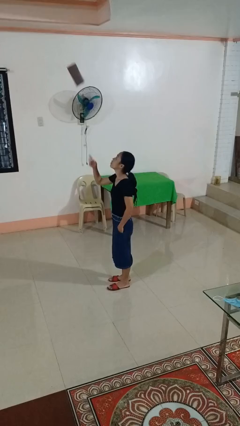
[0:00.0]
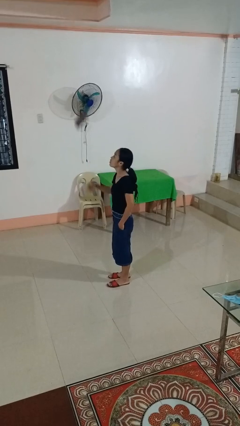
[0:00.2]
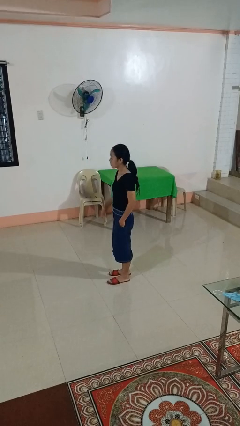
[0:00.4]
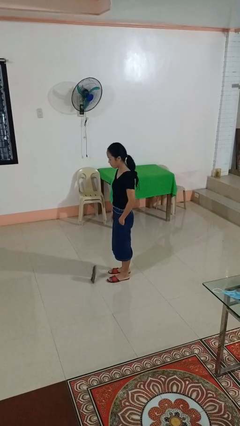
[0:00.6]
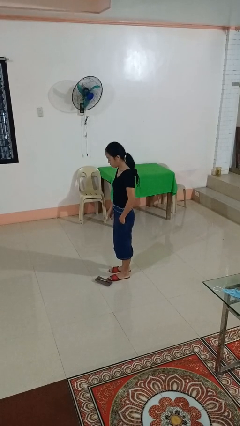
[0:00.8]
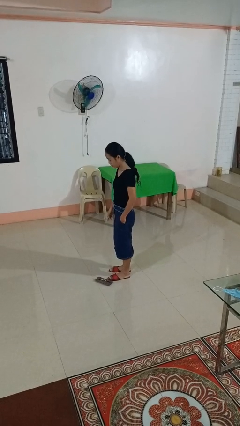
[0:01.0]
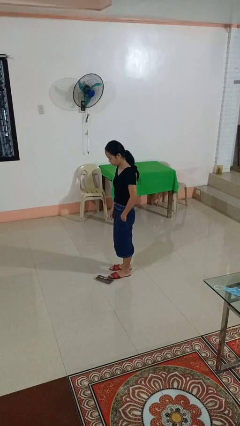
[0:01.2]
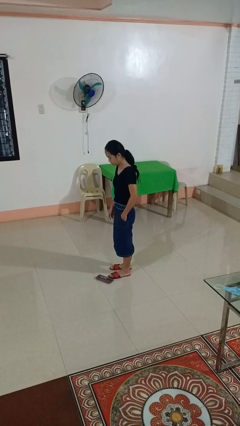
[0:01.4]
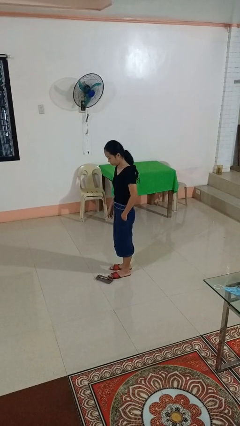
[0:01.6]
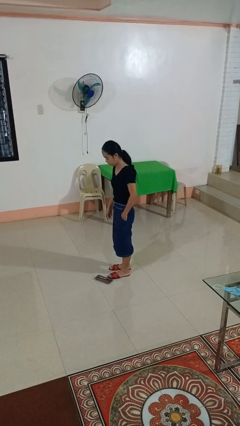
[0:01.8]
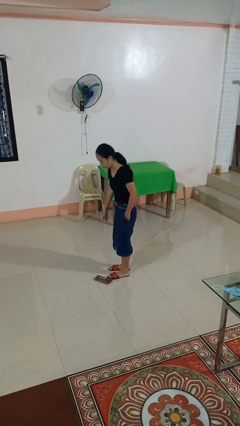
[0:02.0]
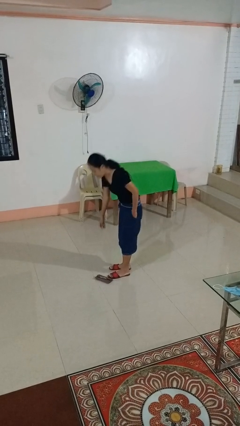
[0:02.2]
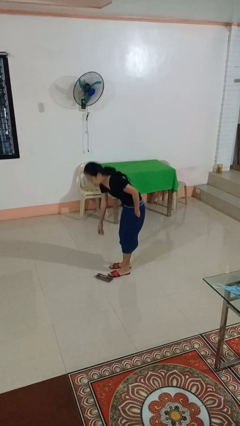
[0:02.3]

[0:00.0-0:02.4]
person throws object into air

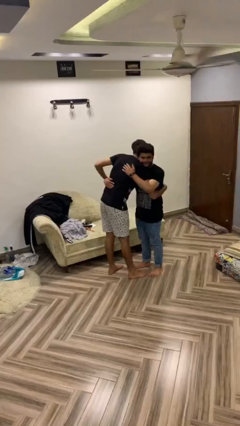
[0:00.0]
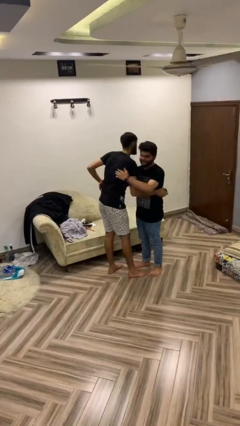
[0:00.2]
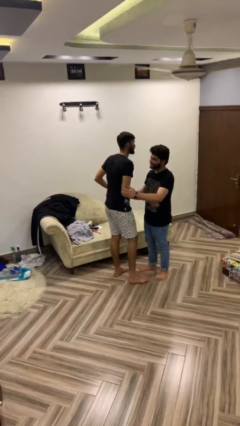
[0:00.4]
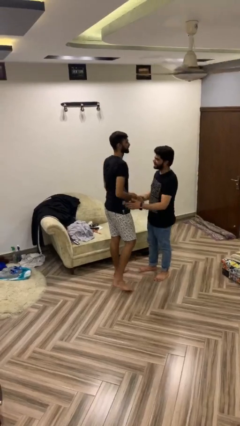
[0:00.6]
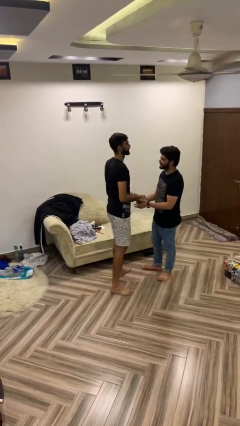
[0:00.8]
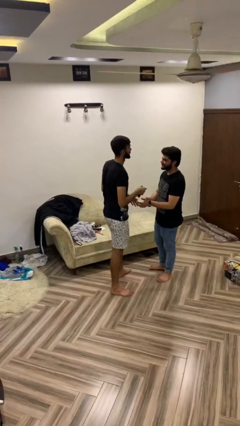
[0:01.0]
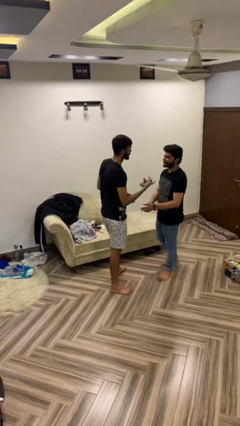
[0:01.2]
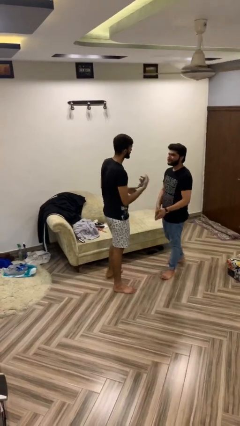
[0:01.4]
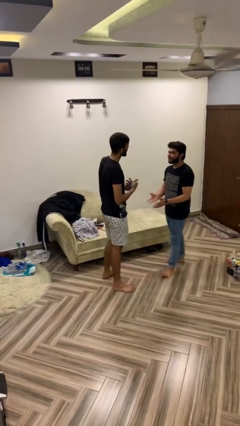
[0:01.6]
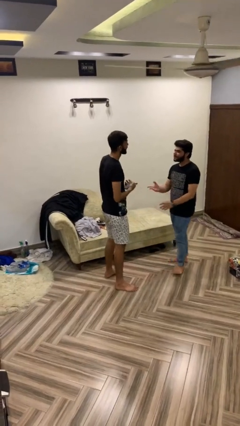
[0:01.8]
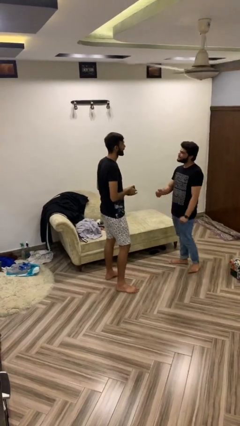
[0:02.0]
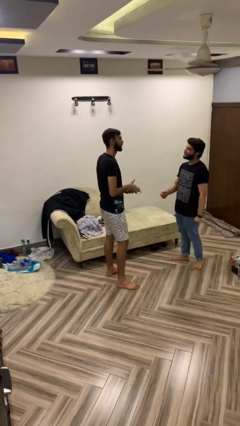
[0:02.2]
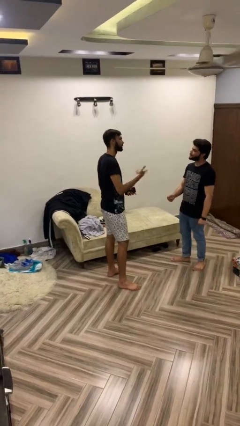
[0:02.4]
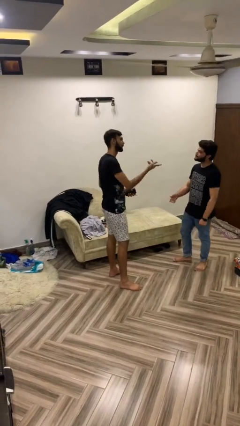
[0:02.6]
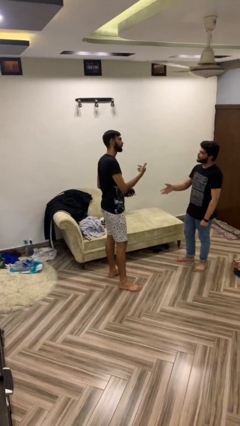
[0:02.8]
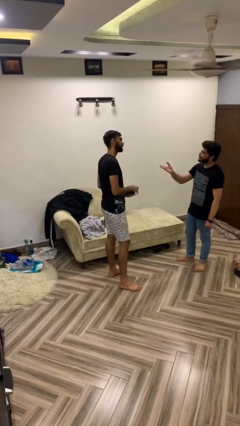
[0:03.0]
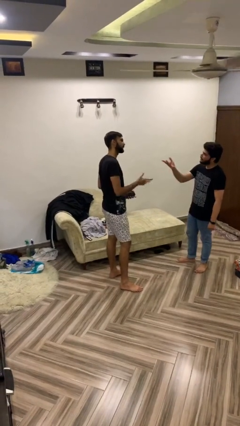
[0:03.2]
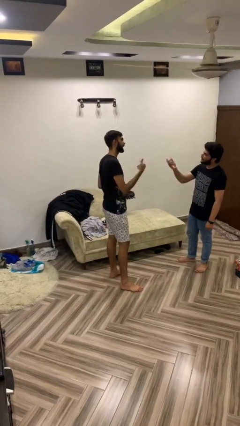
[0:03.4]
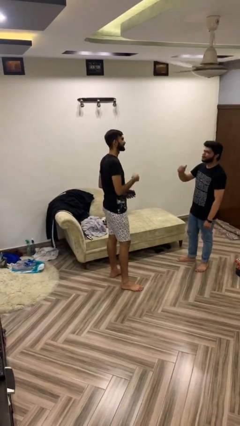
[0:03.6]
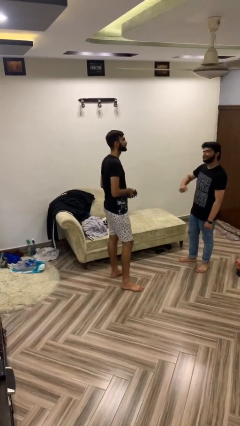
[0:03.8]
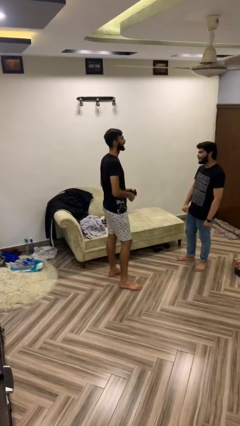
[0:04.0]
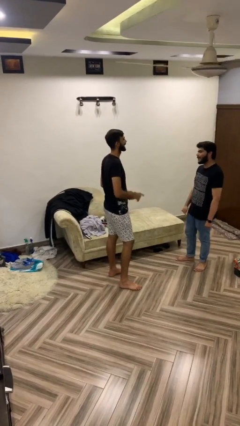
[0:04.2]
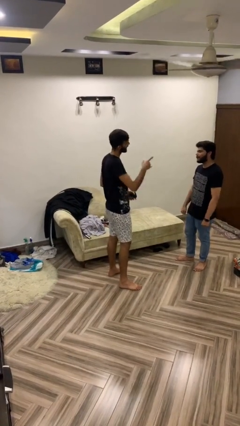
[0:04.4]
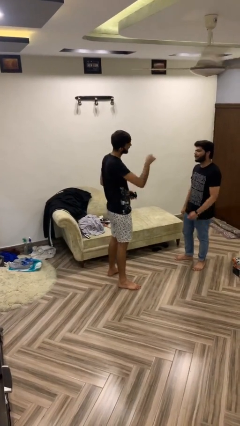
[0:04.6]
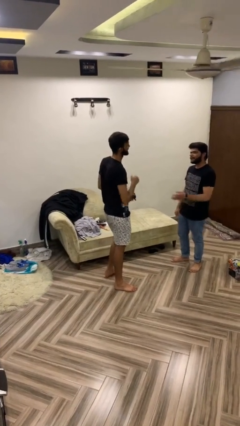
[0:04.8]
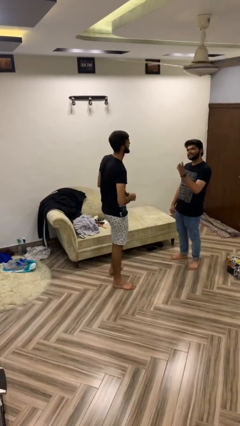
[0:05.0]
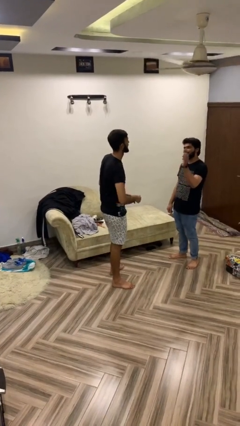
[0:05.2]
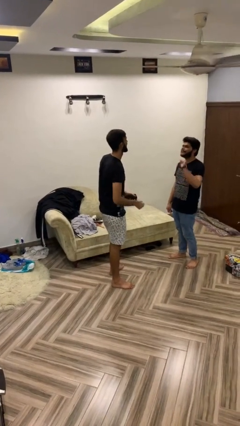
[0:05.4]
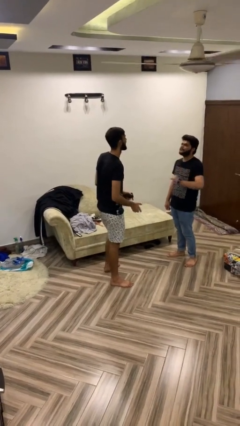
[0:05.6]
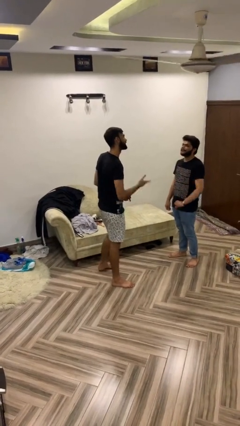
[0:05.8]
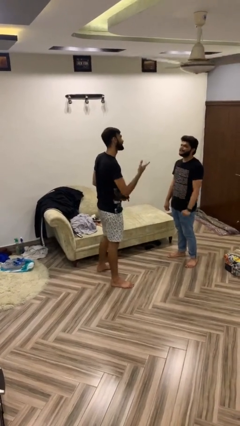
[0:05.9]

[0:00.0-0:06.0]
person talks to person

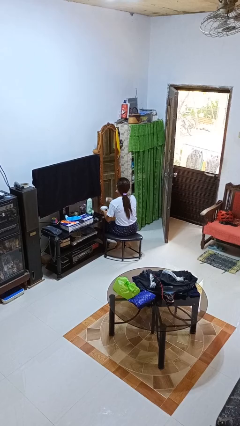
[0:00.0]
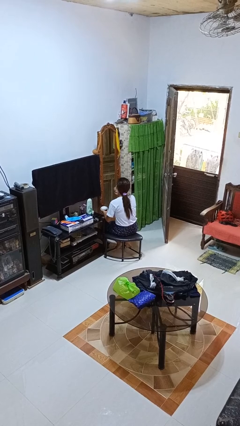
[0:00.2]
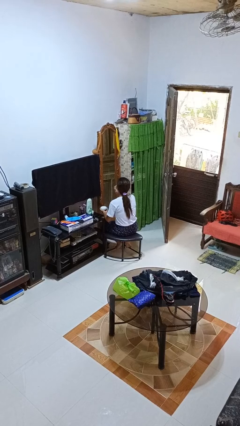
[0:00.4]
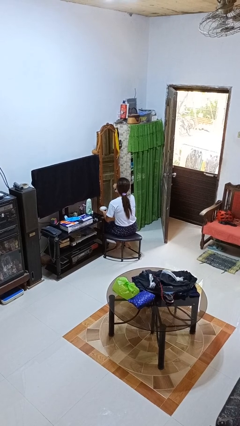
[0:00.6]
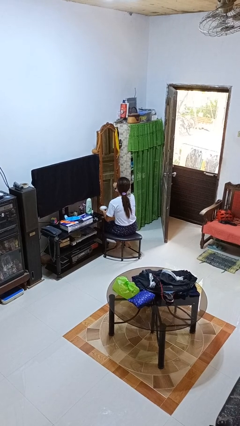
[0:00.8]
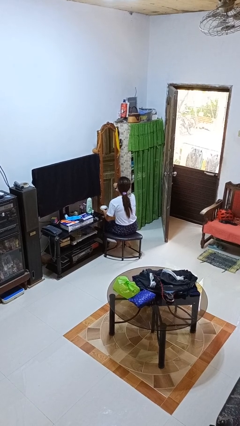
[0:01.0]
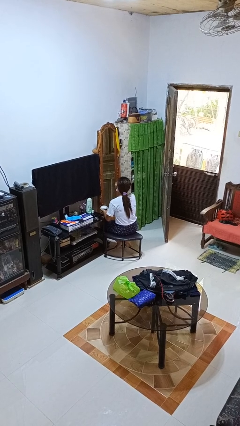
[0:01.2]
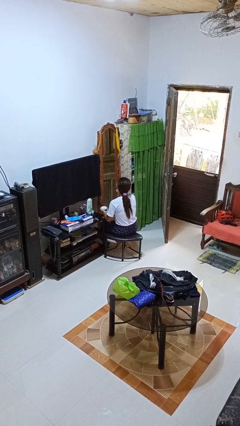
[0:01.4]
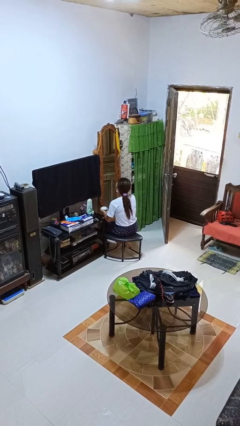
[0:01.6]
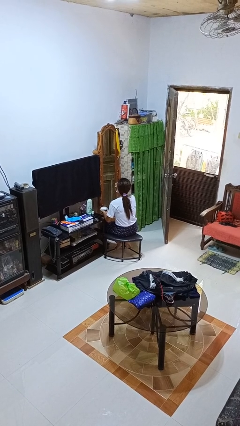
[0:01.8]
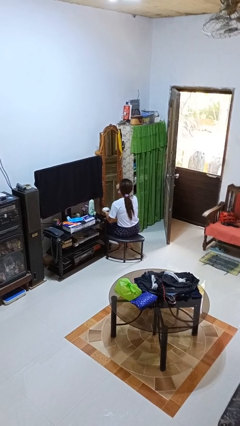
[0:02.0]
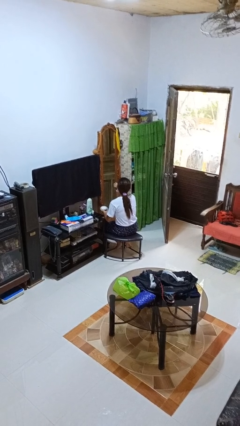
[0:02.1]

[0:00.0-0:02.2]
person applies foundation makeup

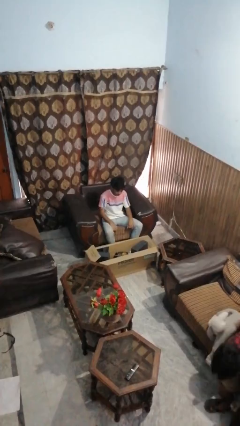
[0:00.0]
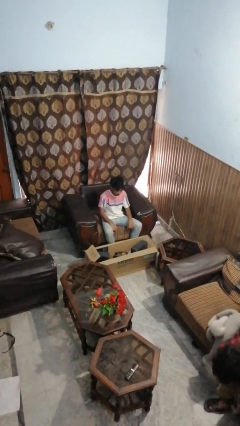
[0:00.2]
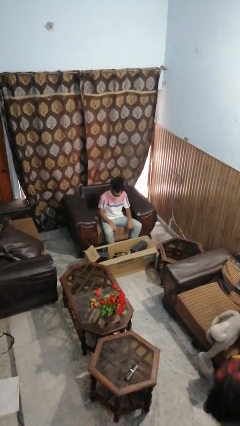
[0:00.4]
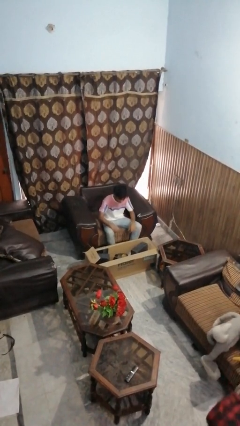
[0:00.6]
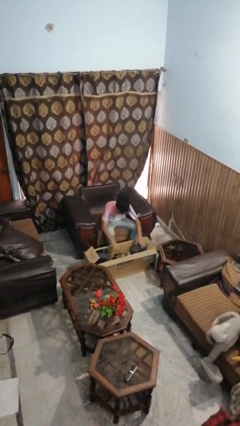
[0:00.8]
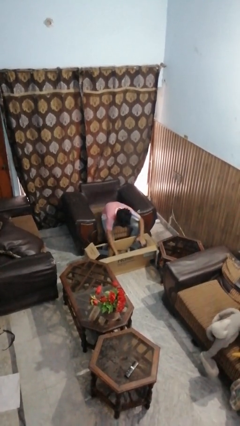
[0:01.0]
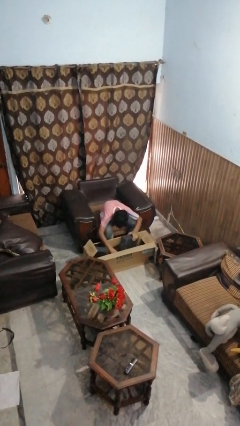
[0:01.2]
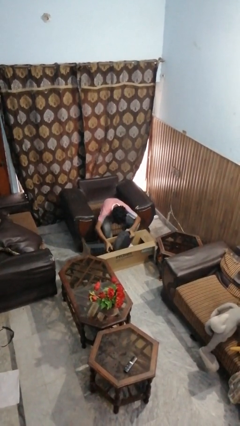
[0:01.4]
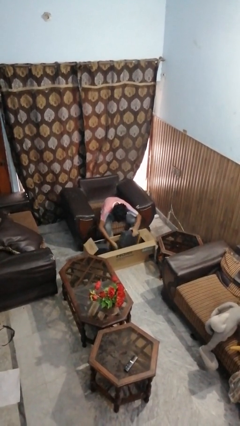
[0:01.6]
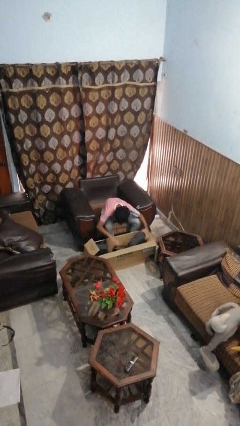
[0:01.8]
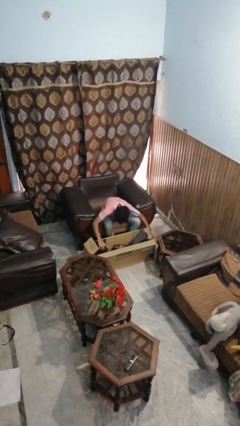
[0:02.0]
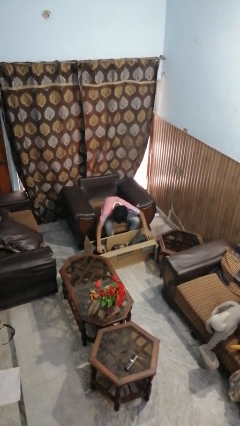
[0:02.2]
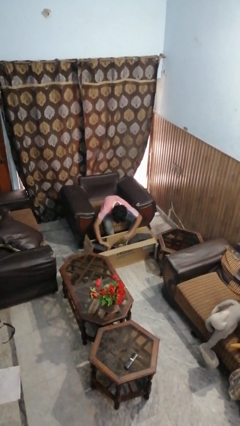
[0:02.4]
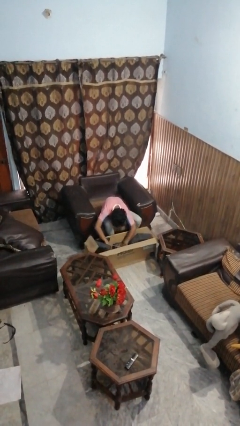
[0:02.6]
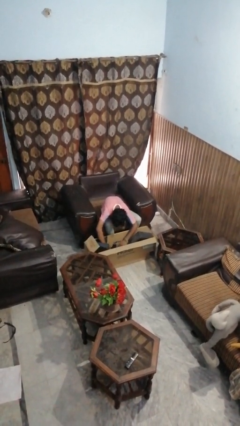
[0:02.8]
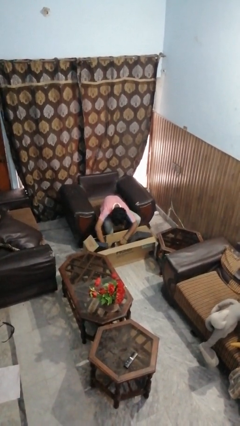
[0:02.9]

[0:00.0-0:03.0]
person searches in box

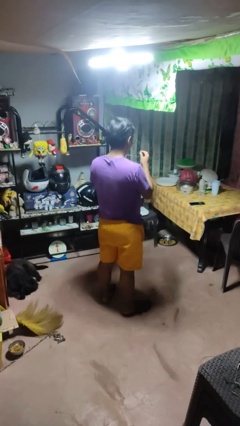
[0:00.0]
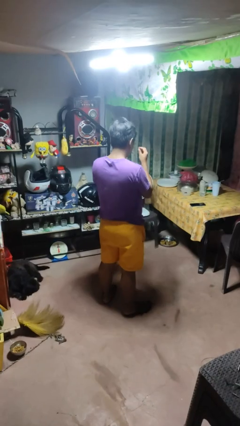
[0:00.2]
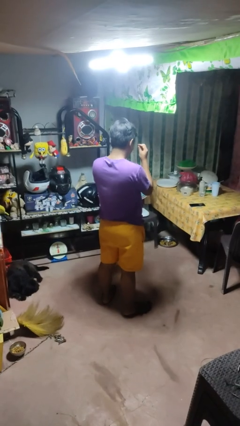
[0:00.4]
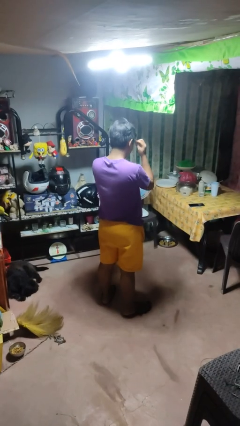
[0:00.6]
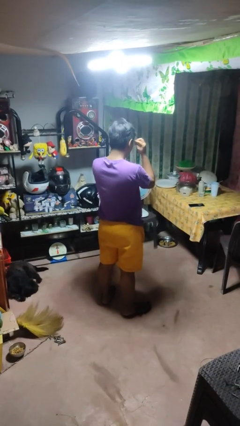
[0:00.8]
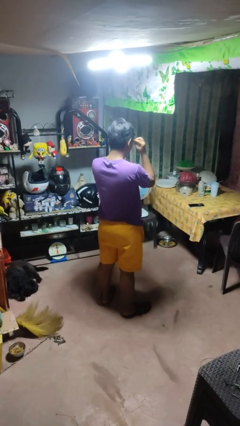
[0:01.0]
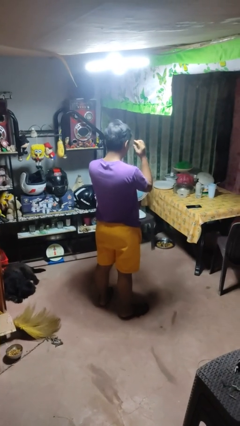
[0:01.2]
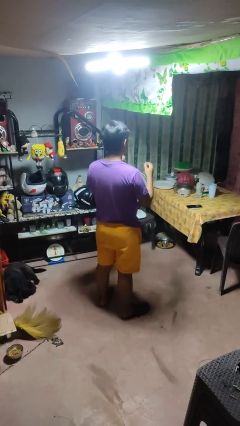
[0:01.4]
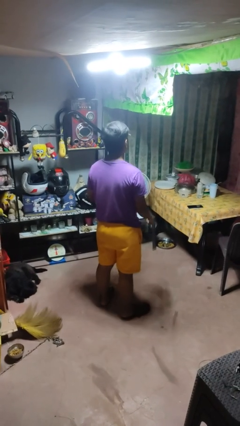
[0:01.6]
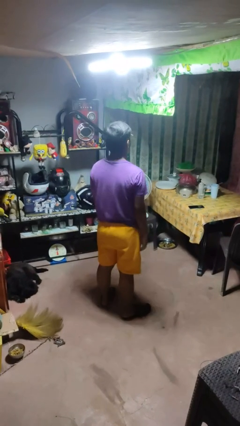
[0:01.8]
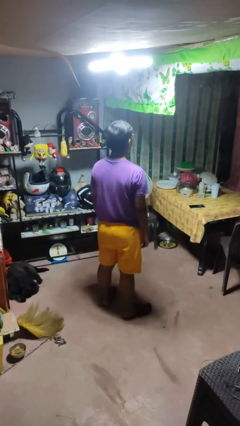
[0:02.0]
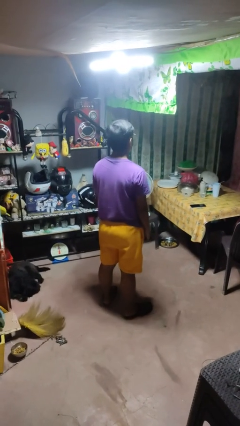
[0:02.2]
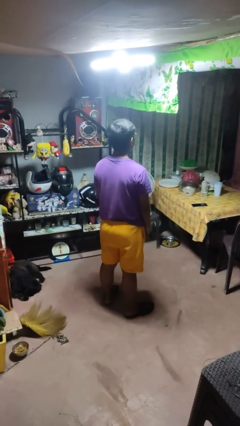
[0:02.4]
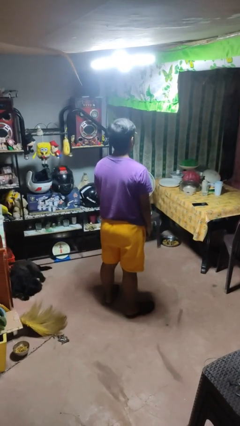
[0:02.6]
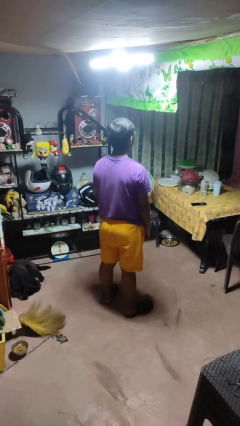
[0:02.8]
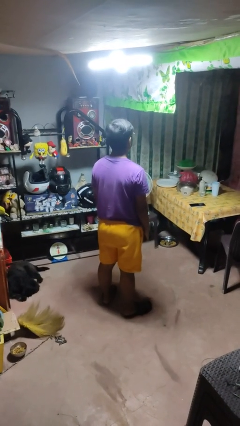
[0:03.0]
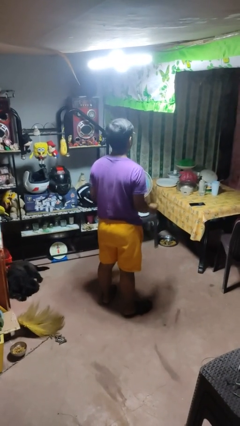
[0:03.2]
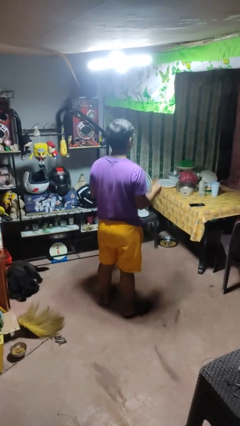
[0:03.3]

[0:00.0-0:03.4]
person puts on glasses

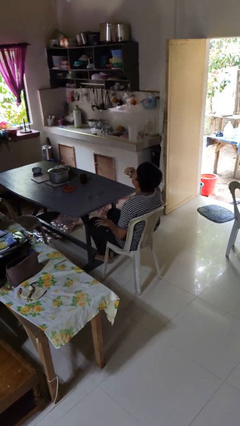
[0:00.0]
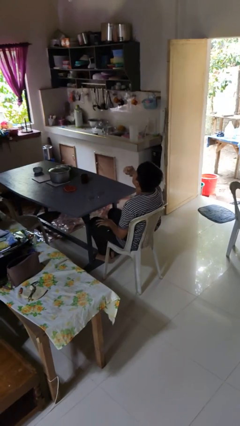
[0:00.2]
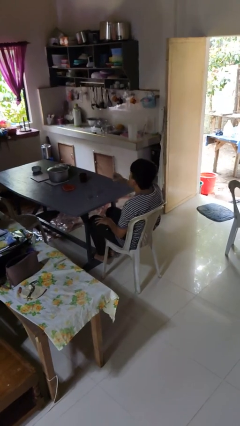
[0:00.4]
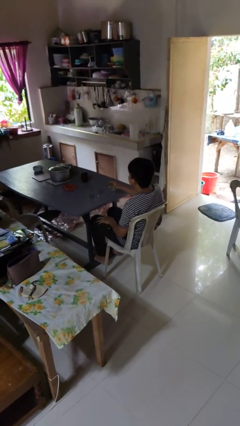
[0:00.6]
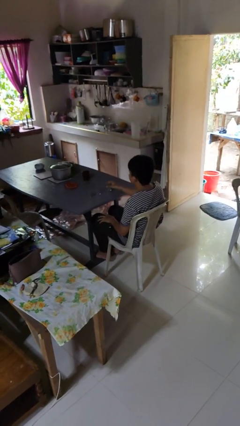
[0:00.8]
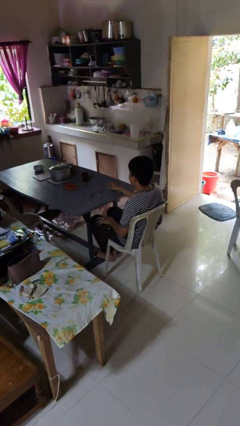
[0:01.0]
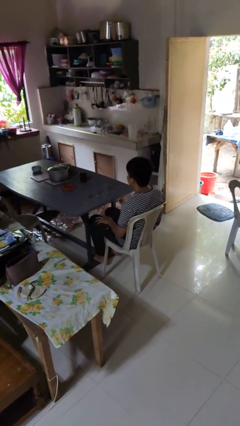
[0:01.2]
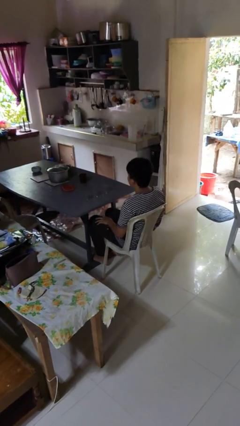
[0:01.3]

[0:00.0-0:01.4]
person puts down object on table
